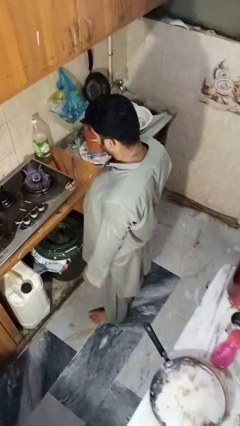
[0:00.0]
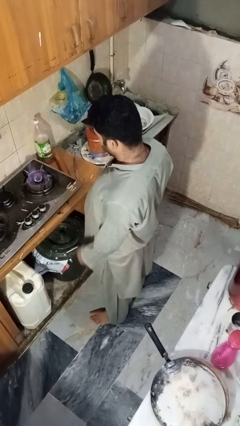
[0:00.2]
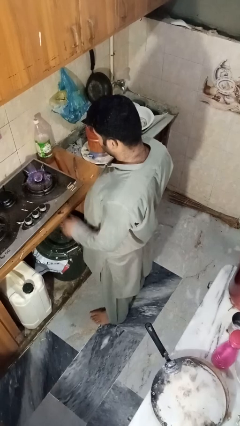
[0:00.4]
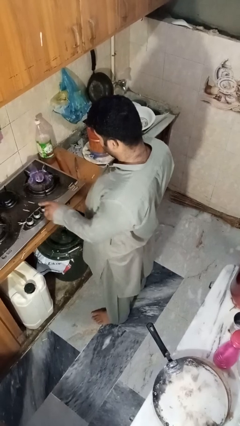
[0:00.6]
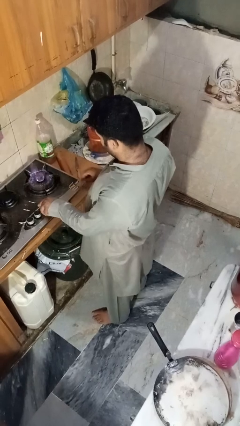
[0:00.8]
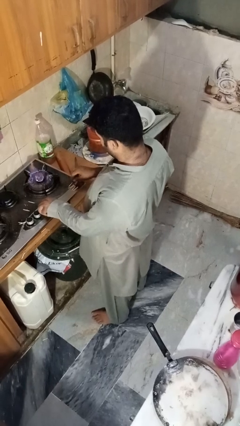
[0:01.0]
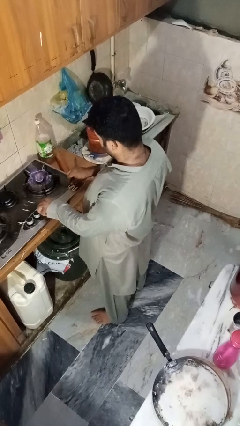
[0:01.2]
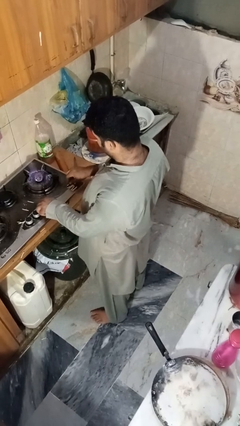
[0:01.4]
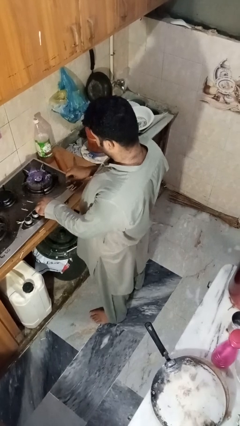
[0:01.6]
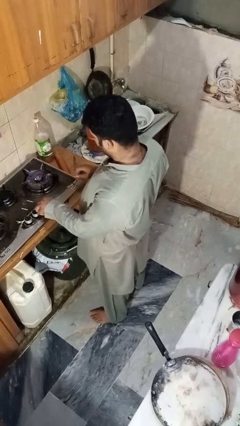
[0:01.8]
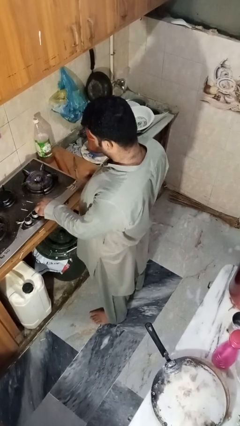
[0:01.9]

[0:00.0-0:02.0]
person turns off stovetop

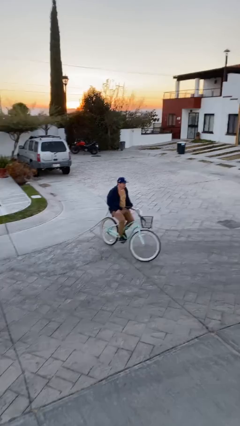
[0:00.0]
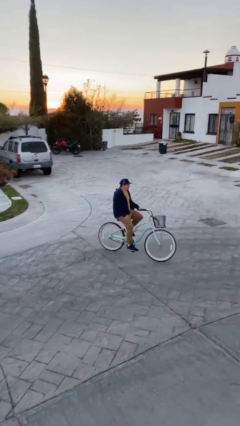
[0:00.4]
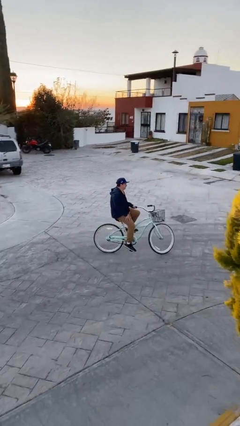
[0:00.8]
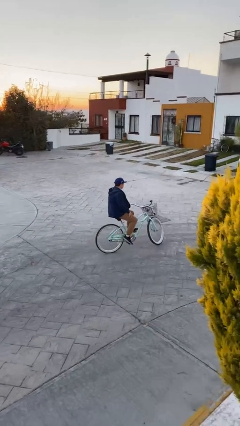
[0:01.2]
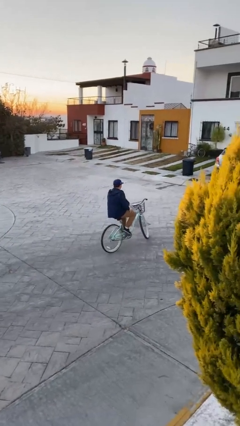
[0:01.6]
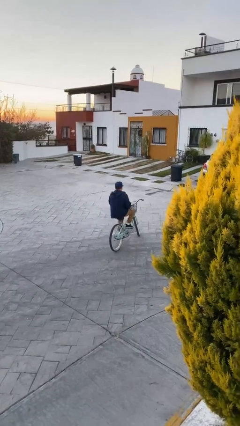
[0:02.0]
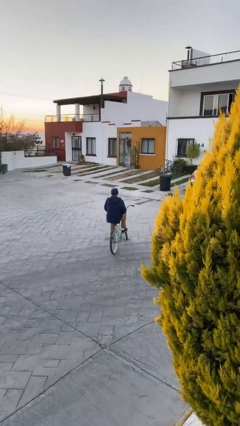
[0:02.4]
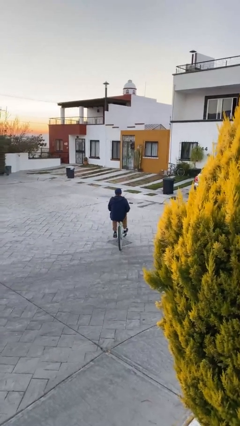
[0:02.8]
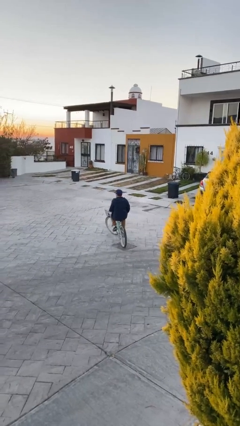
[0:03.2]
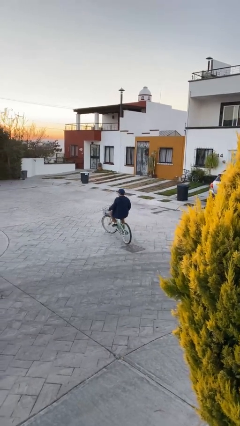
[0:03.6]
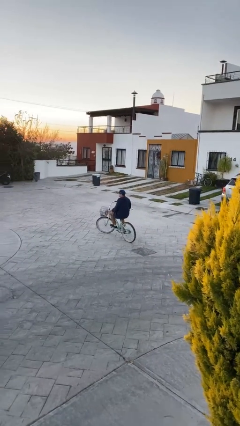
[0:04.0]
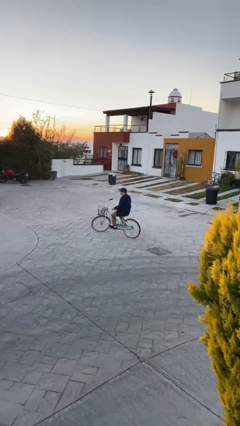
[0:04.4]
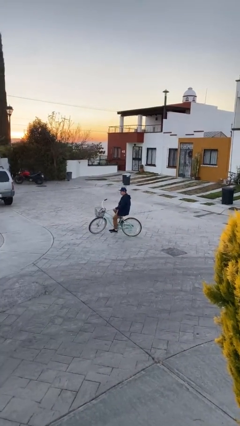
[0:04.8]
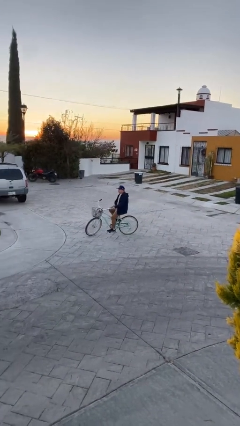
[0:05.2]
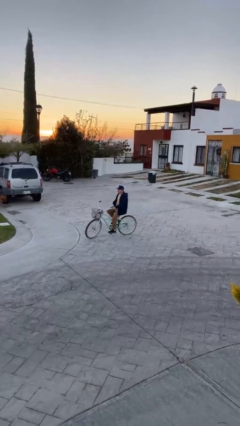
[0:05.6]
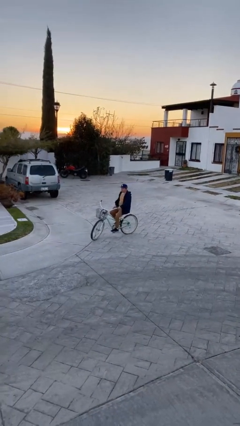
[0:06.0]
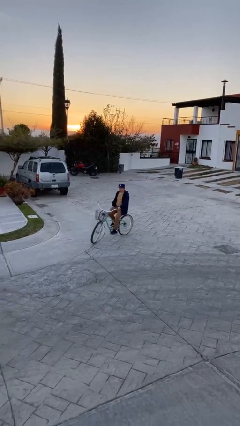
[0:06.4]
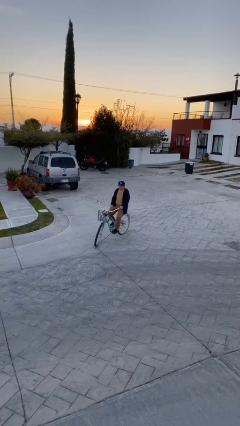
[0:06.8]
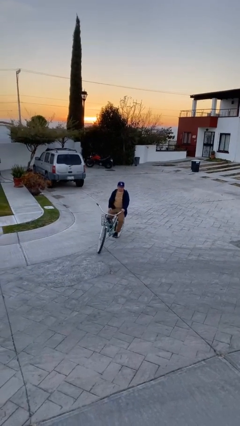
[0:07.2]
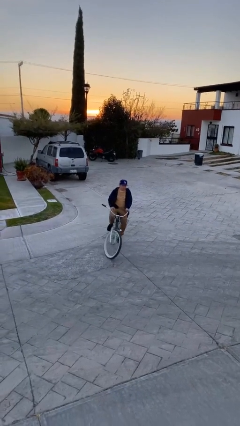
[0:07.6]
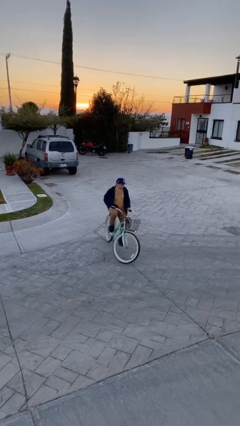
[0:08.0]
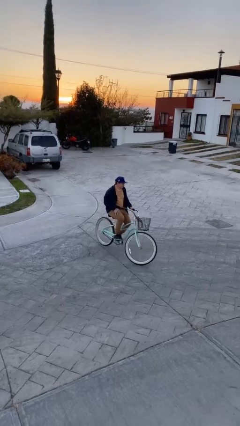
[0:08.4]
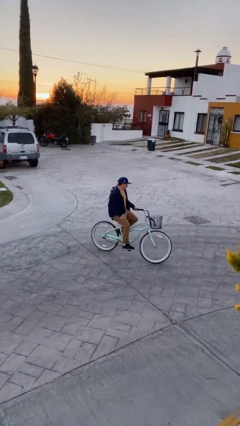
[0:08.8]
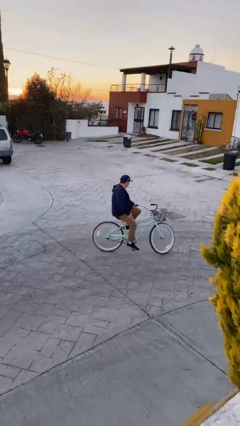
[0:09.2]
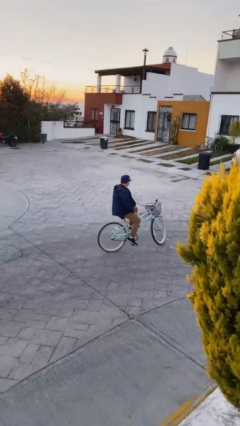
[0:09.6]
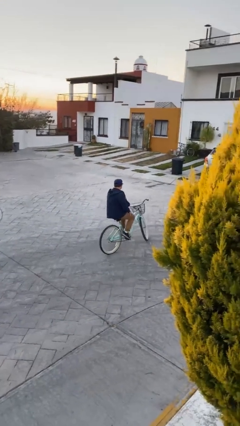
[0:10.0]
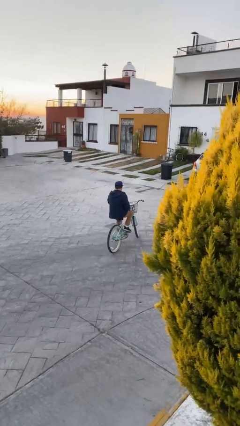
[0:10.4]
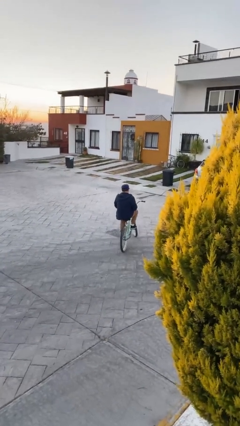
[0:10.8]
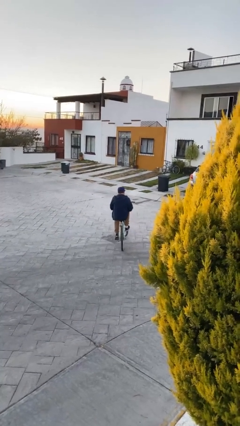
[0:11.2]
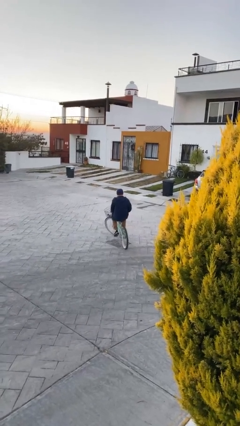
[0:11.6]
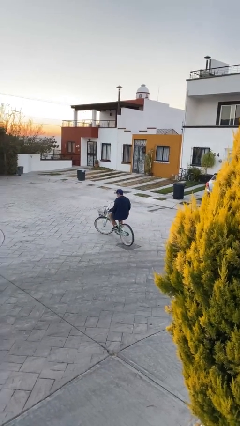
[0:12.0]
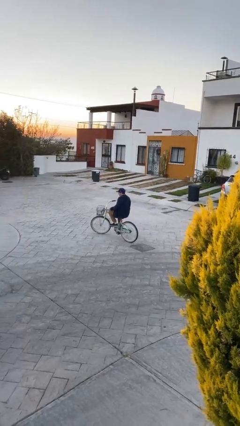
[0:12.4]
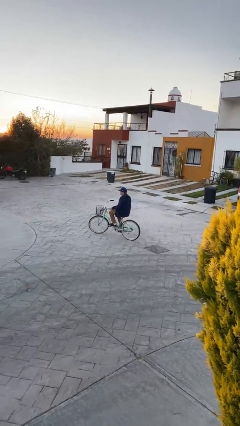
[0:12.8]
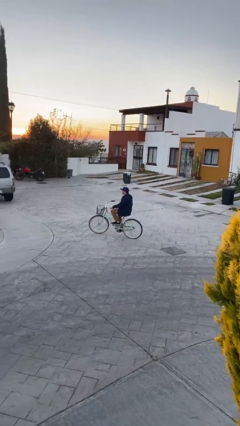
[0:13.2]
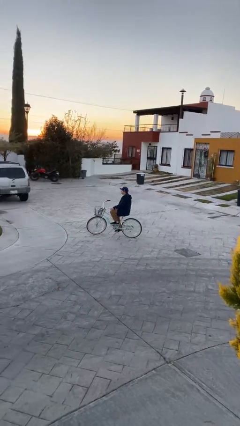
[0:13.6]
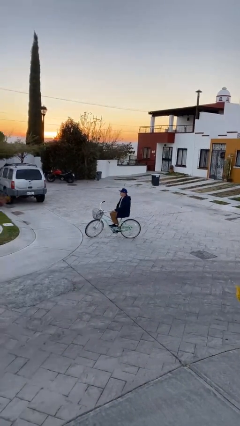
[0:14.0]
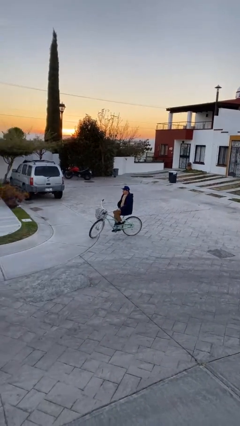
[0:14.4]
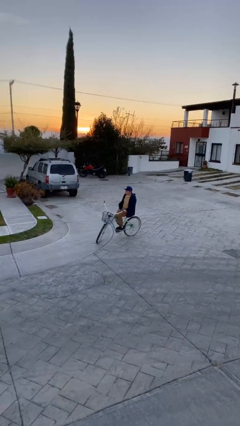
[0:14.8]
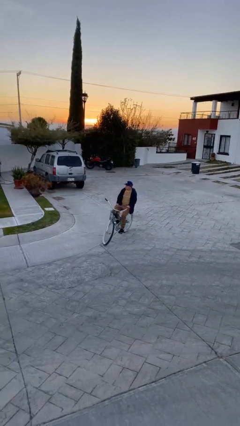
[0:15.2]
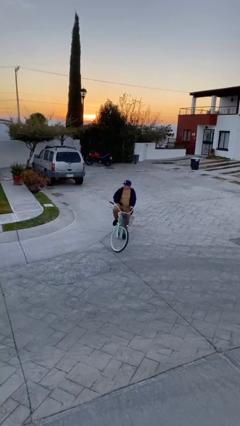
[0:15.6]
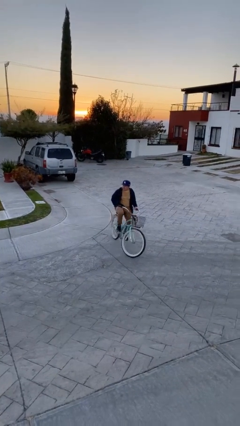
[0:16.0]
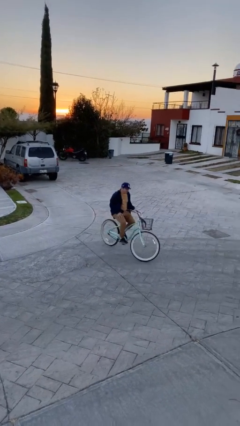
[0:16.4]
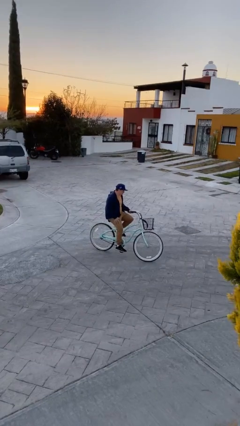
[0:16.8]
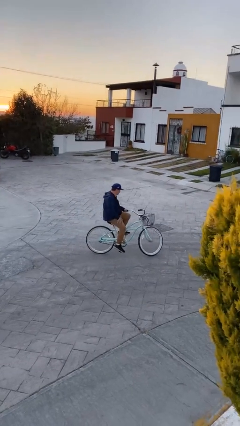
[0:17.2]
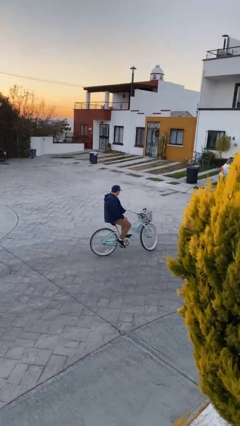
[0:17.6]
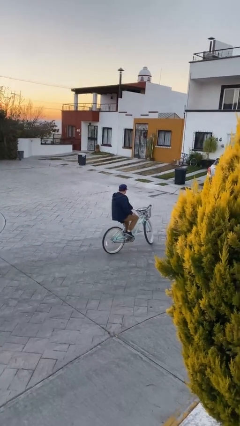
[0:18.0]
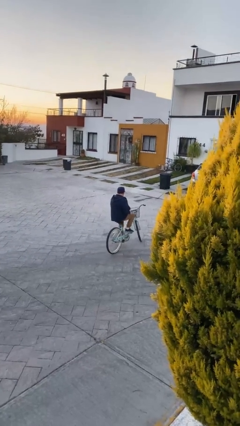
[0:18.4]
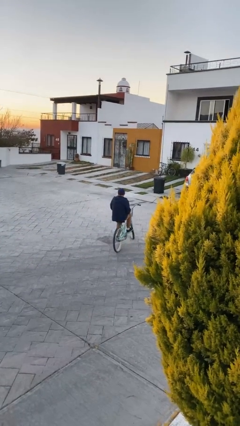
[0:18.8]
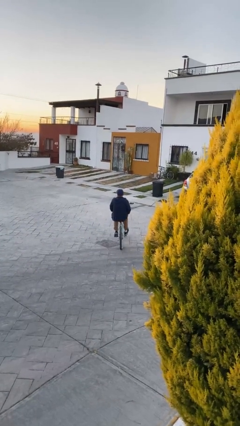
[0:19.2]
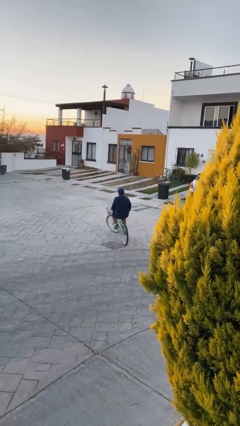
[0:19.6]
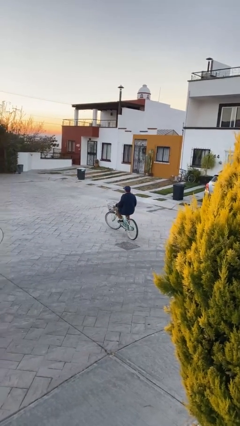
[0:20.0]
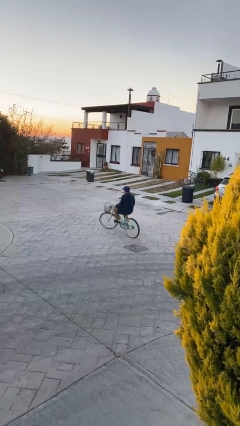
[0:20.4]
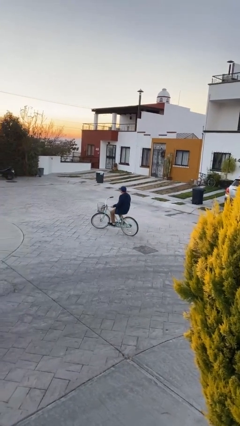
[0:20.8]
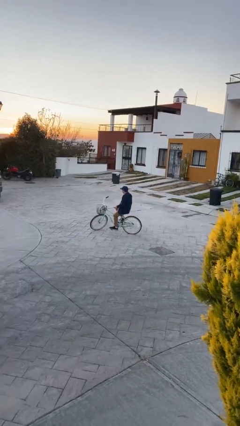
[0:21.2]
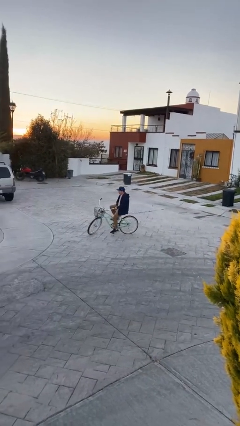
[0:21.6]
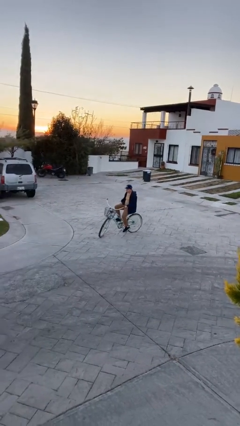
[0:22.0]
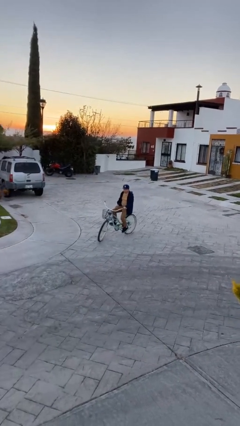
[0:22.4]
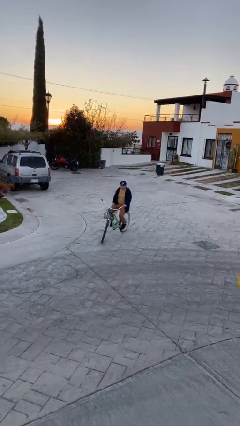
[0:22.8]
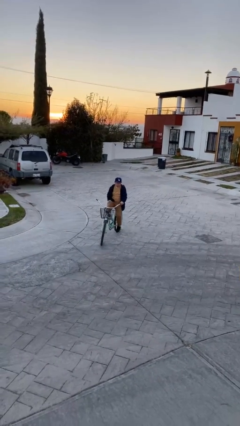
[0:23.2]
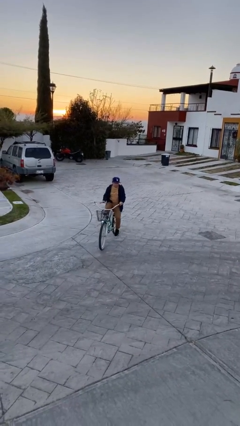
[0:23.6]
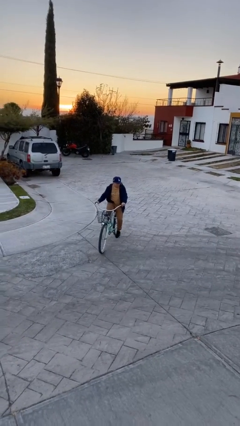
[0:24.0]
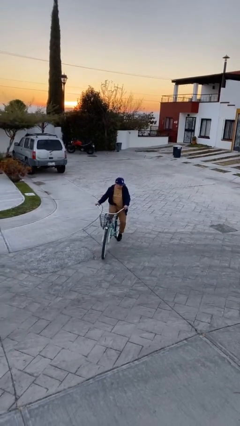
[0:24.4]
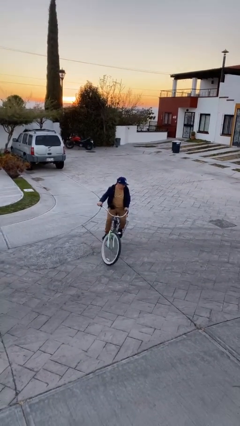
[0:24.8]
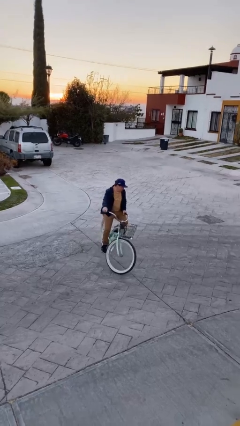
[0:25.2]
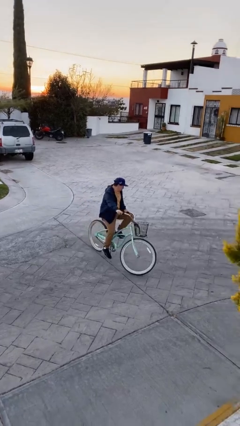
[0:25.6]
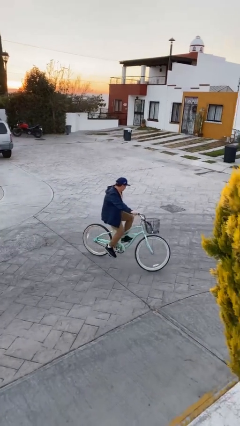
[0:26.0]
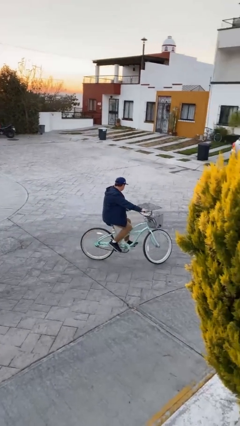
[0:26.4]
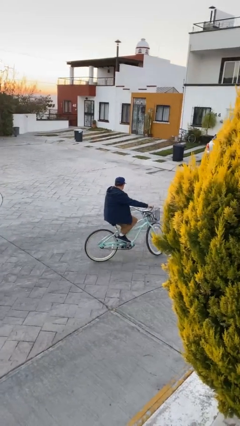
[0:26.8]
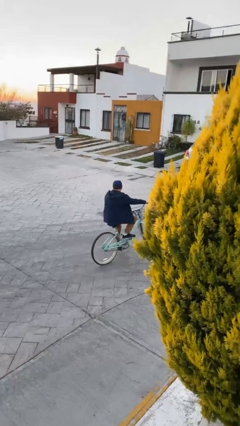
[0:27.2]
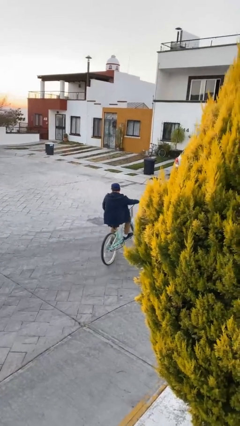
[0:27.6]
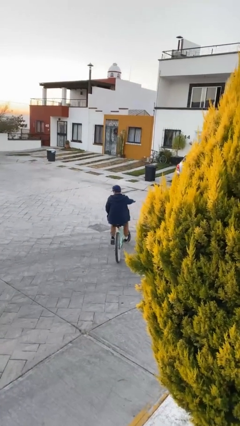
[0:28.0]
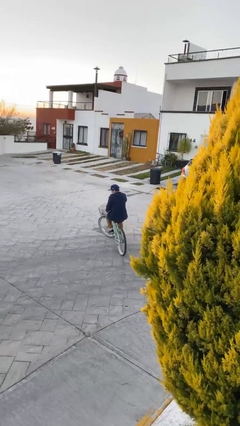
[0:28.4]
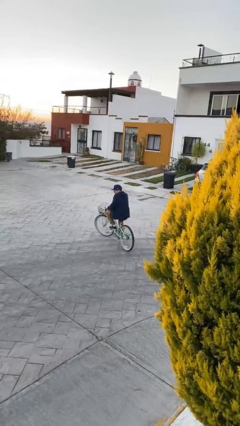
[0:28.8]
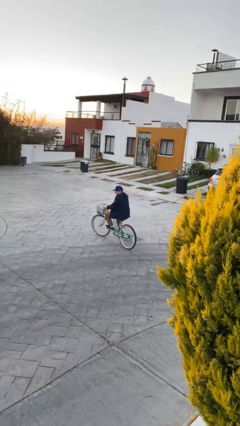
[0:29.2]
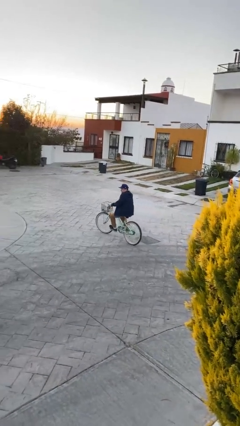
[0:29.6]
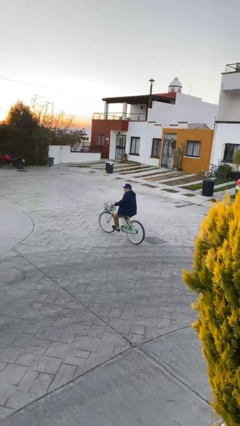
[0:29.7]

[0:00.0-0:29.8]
person rides bicycle

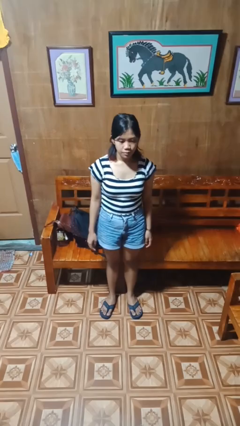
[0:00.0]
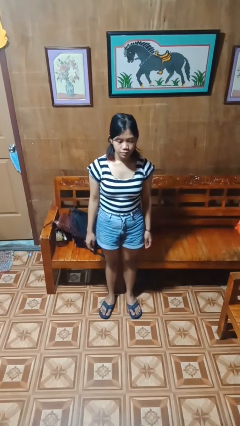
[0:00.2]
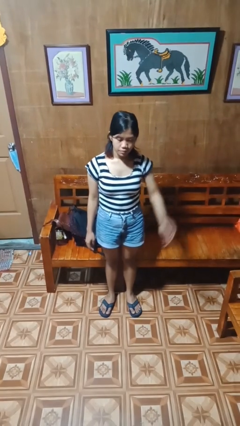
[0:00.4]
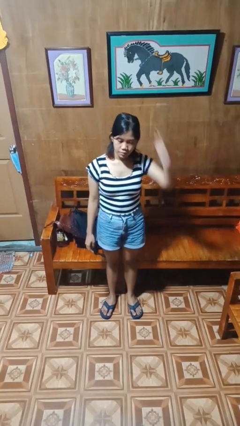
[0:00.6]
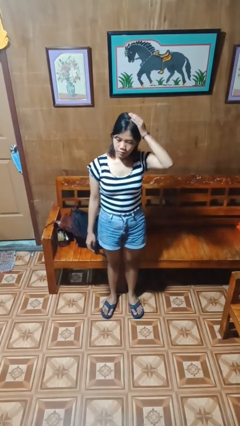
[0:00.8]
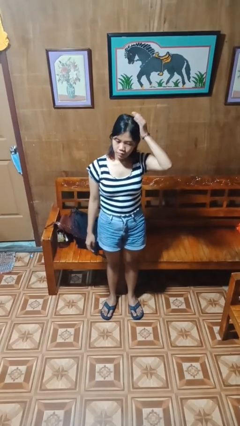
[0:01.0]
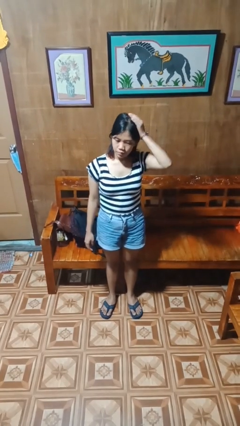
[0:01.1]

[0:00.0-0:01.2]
person pats head
